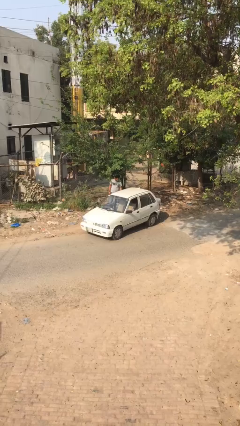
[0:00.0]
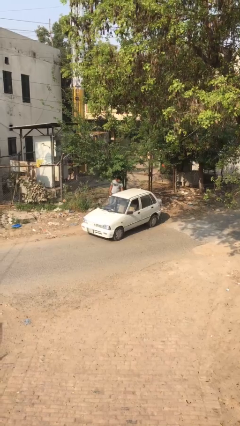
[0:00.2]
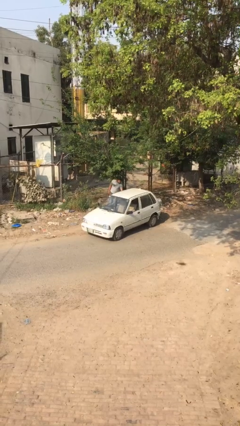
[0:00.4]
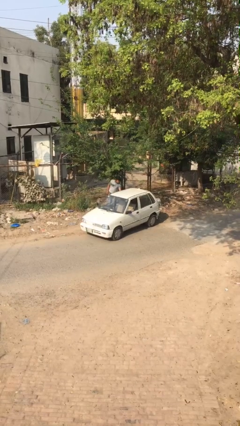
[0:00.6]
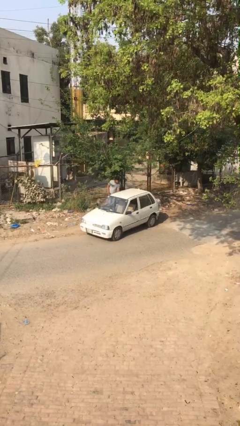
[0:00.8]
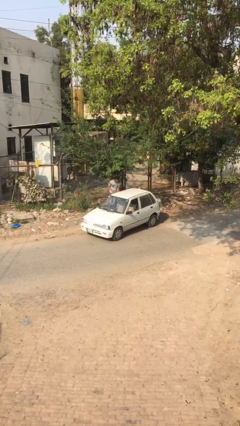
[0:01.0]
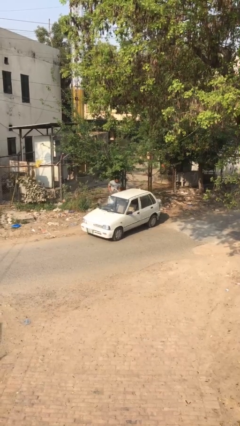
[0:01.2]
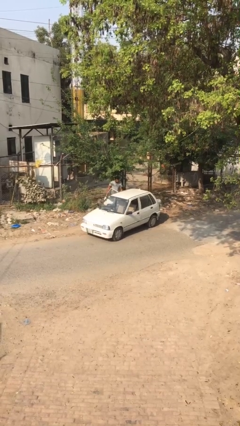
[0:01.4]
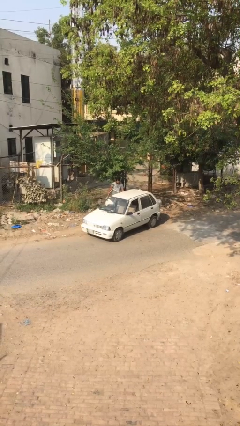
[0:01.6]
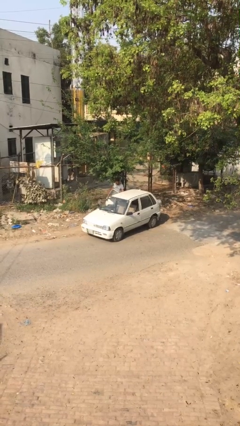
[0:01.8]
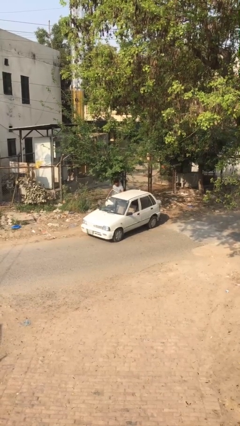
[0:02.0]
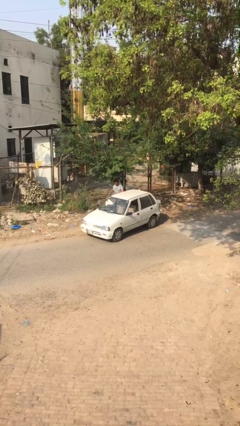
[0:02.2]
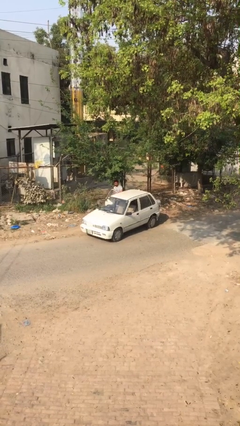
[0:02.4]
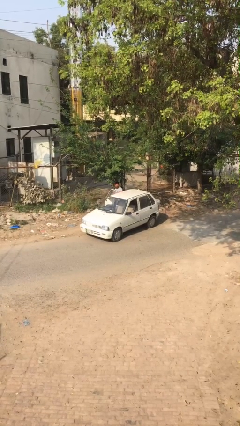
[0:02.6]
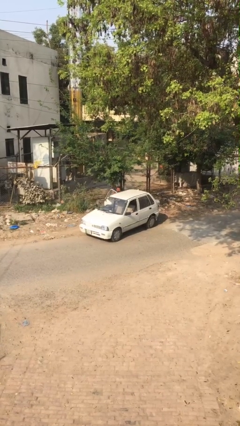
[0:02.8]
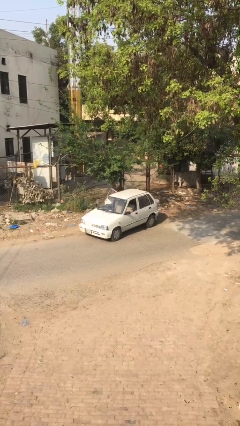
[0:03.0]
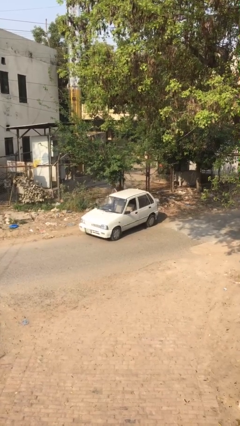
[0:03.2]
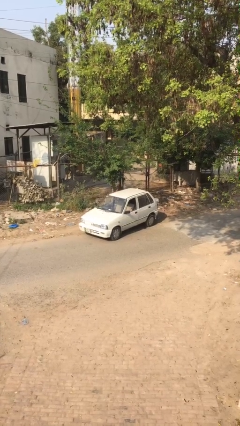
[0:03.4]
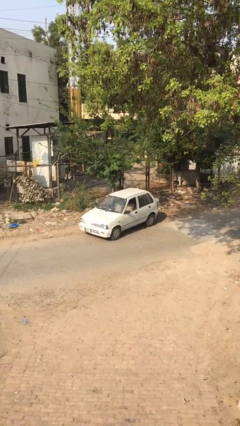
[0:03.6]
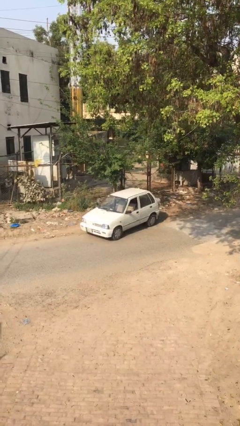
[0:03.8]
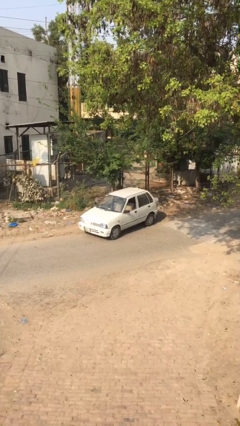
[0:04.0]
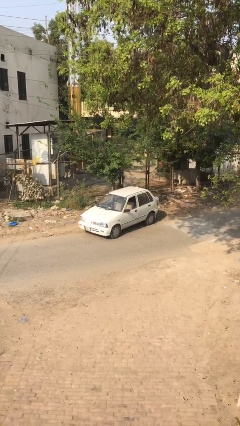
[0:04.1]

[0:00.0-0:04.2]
car picks up person

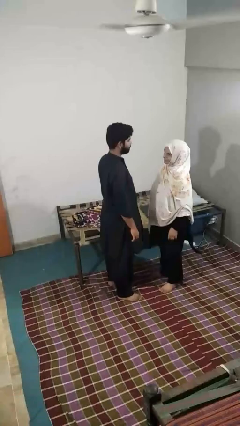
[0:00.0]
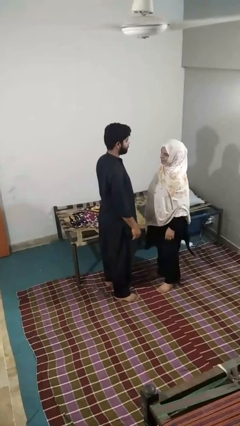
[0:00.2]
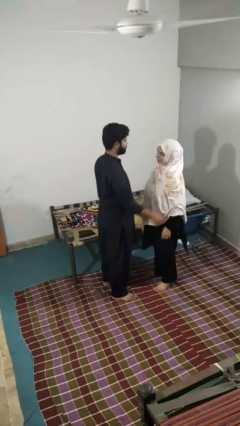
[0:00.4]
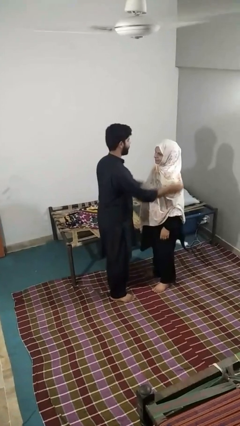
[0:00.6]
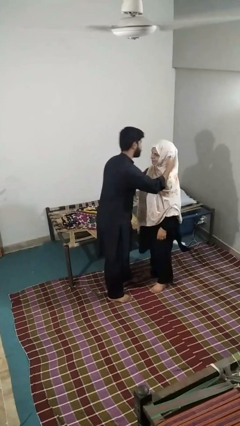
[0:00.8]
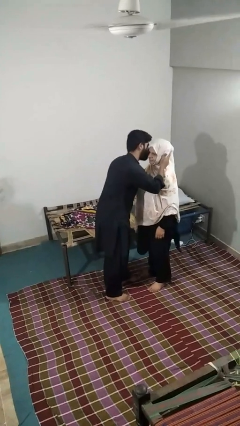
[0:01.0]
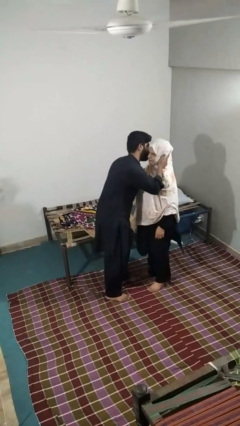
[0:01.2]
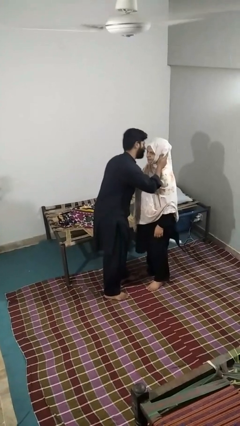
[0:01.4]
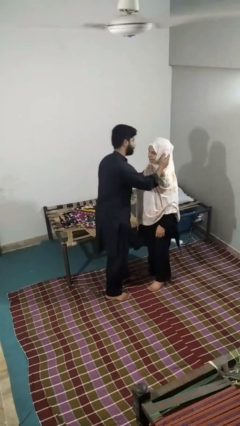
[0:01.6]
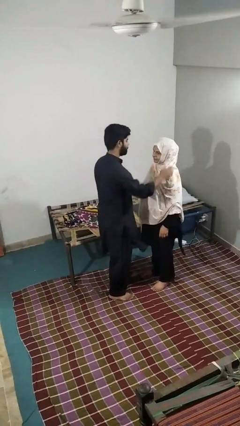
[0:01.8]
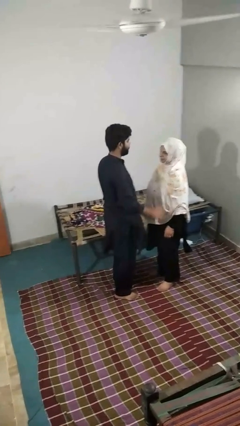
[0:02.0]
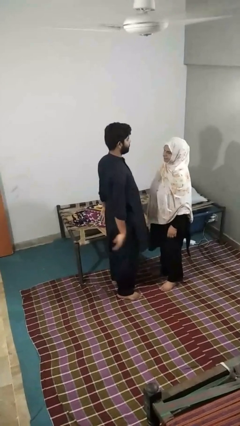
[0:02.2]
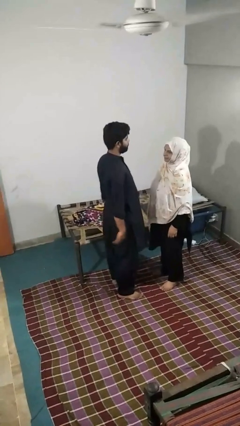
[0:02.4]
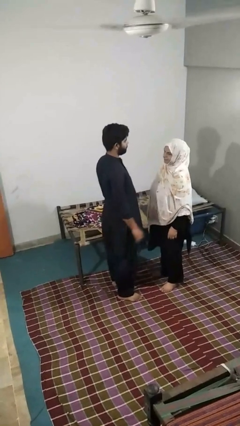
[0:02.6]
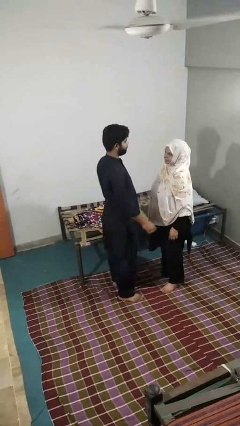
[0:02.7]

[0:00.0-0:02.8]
person kisses cheek of person

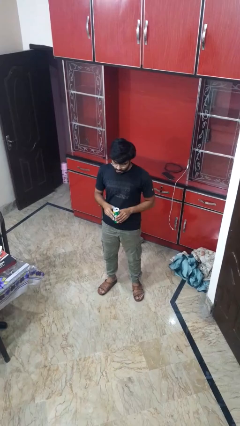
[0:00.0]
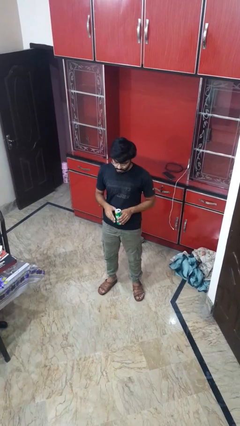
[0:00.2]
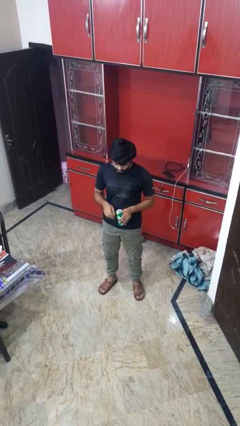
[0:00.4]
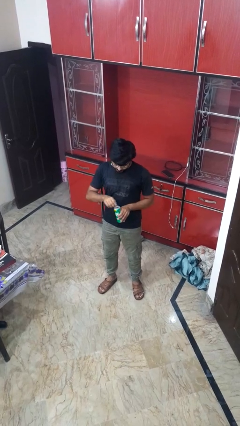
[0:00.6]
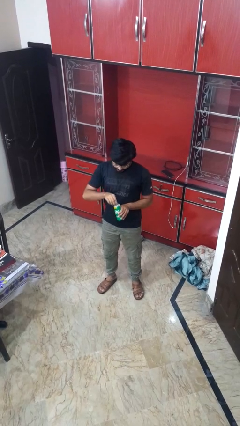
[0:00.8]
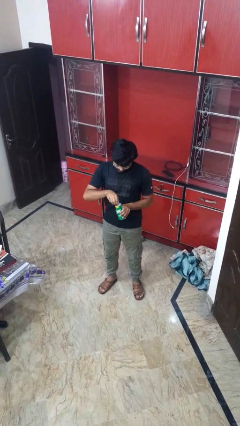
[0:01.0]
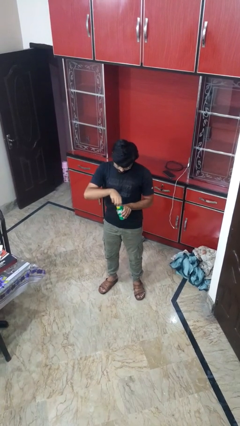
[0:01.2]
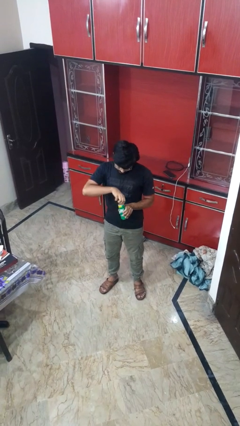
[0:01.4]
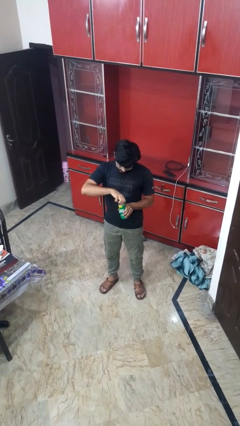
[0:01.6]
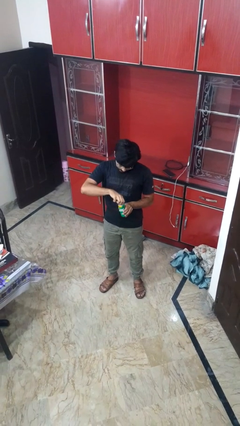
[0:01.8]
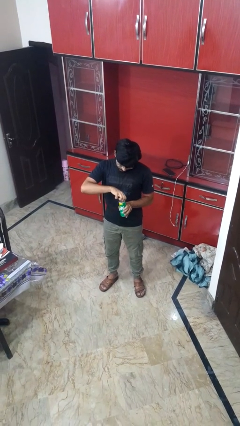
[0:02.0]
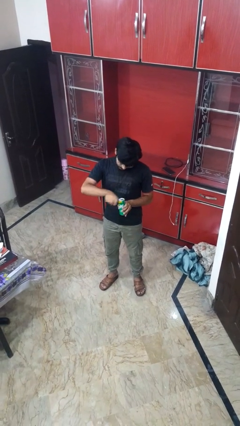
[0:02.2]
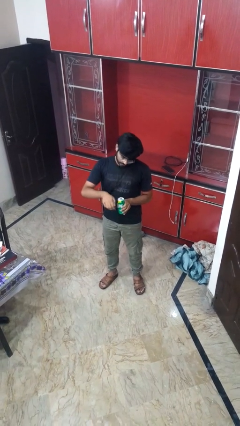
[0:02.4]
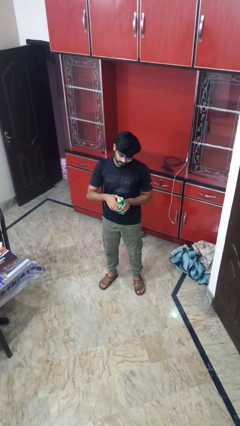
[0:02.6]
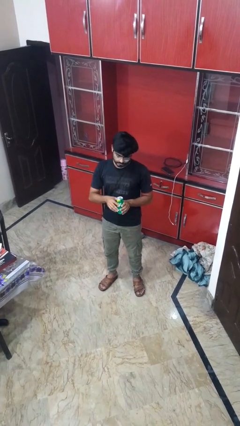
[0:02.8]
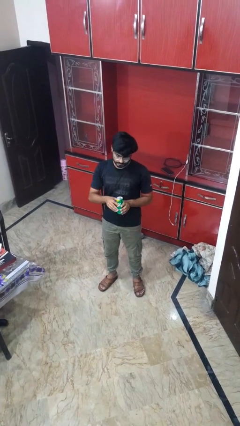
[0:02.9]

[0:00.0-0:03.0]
person opens beverage can

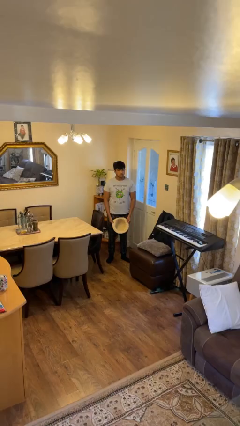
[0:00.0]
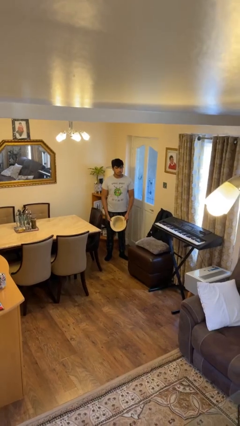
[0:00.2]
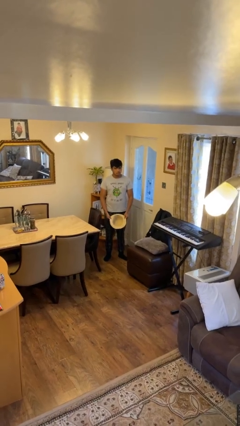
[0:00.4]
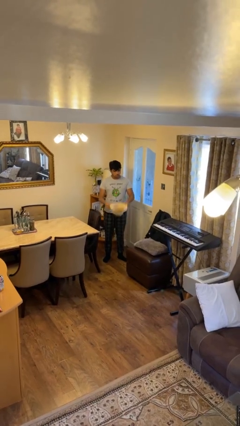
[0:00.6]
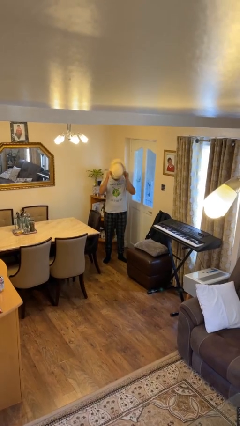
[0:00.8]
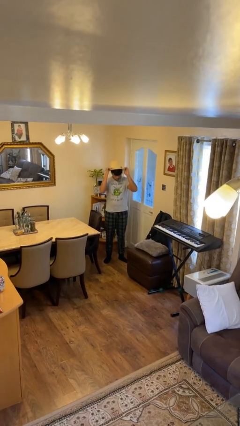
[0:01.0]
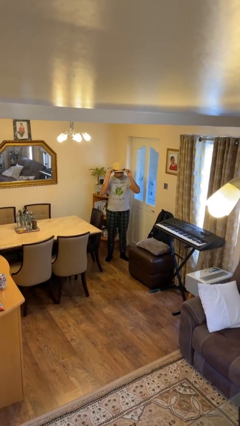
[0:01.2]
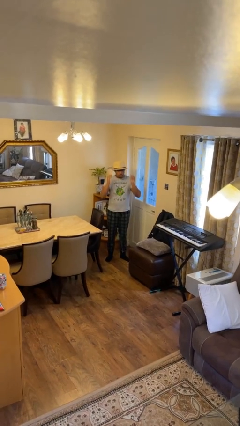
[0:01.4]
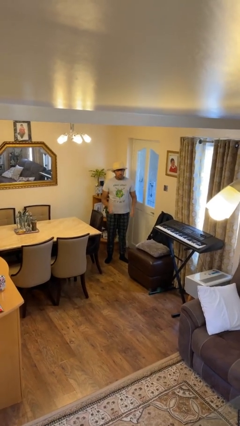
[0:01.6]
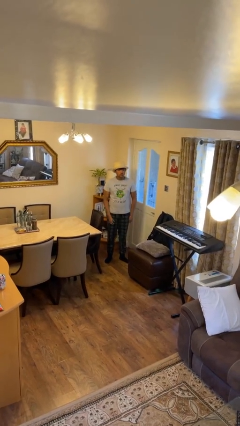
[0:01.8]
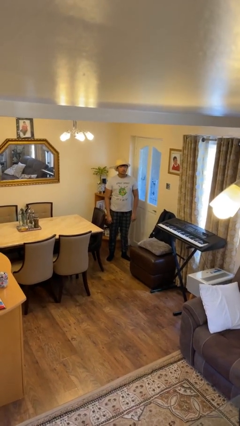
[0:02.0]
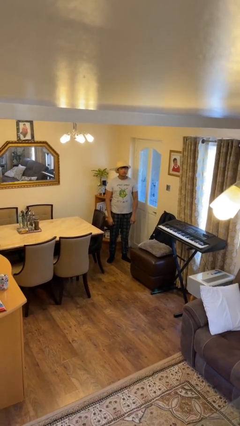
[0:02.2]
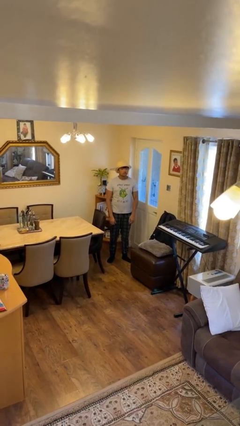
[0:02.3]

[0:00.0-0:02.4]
person puts on hat

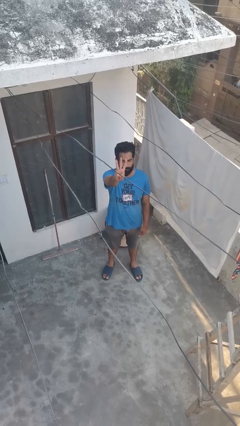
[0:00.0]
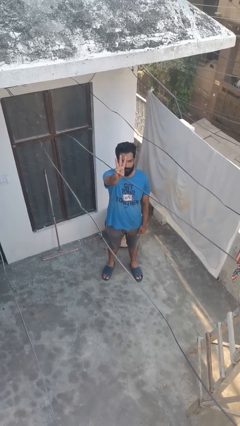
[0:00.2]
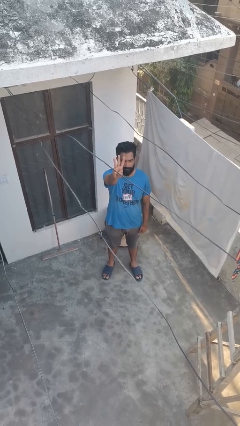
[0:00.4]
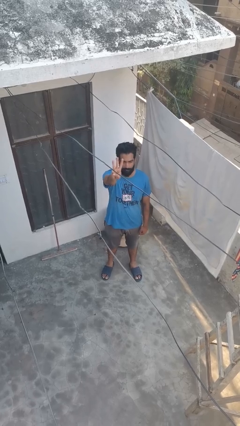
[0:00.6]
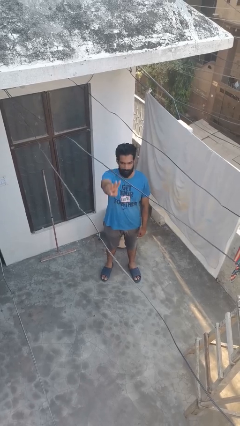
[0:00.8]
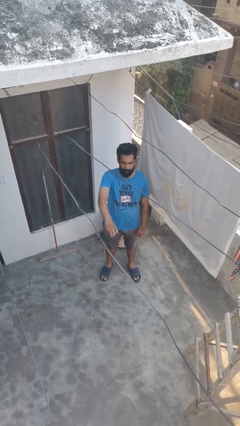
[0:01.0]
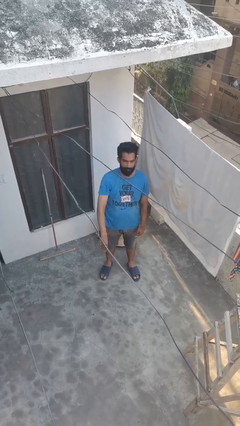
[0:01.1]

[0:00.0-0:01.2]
person gestures number three

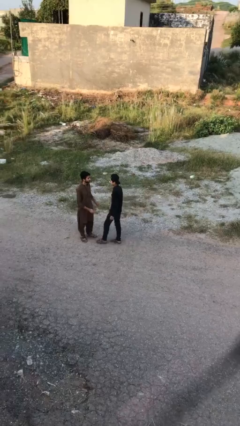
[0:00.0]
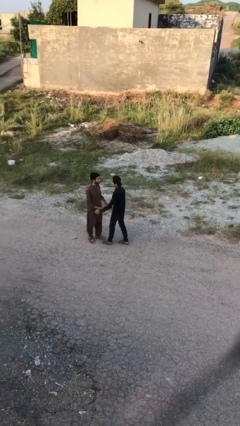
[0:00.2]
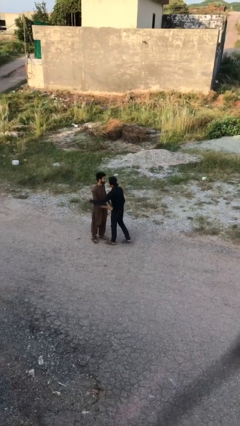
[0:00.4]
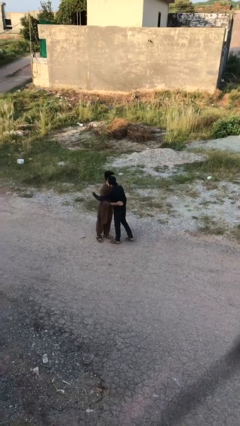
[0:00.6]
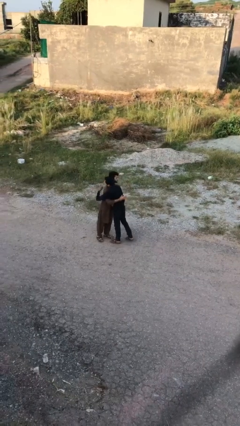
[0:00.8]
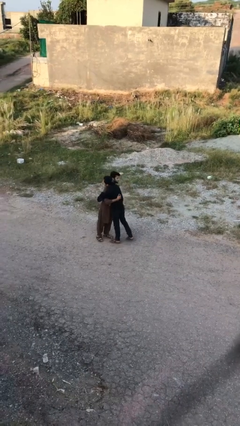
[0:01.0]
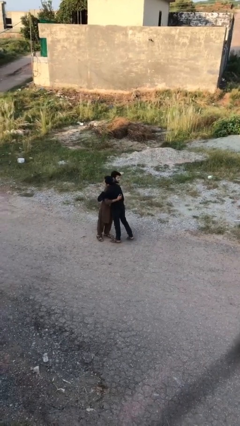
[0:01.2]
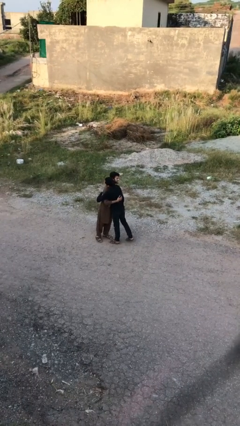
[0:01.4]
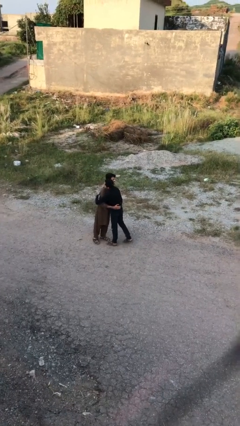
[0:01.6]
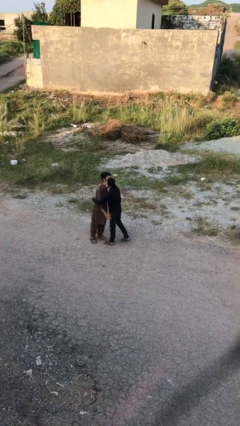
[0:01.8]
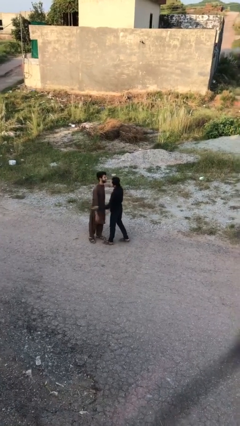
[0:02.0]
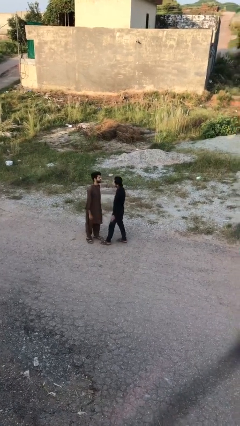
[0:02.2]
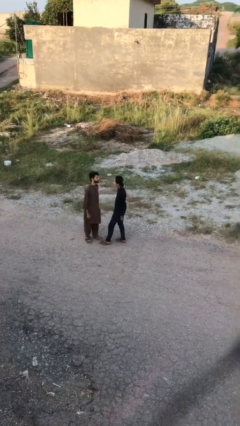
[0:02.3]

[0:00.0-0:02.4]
person embraces person

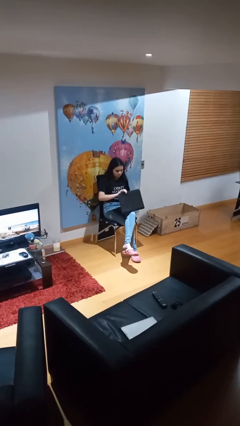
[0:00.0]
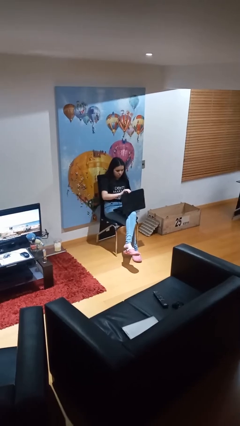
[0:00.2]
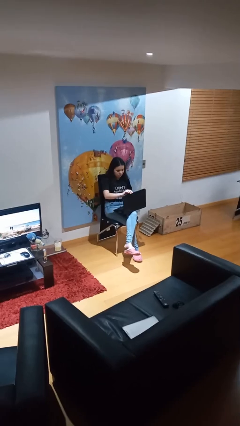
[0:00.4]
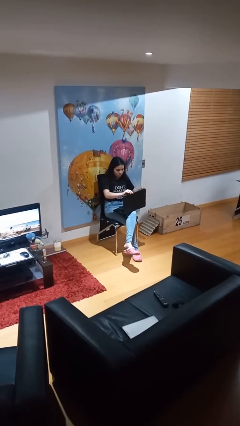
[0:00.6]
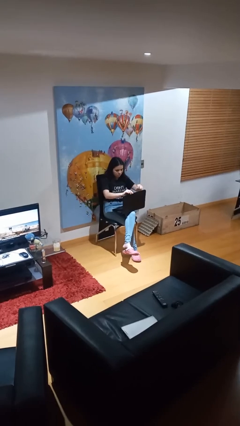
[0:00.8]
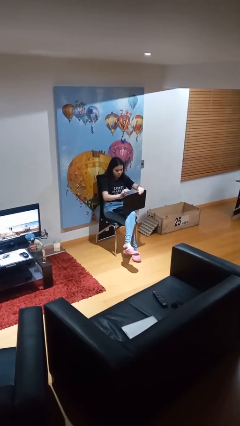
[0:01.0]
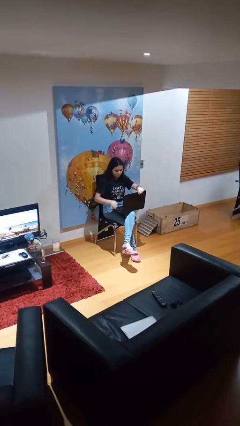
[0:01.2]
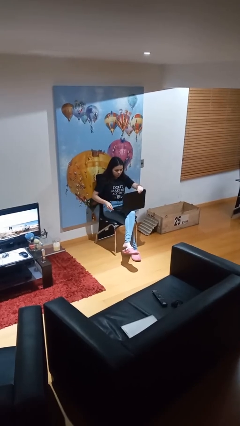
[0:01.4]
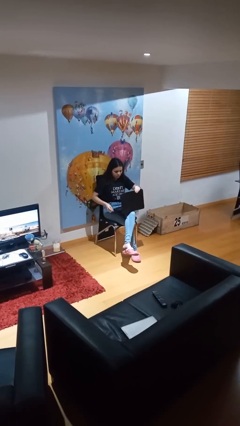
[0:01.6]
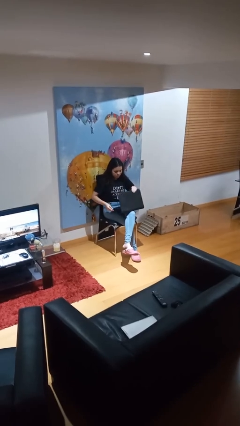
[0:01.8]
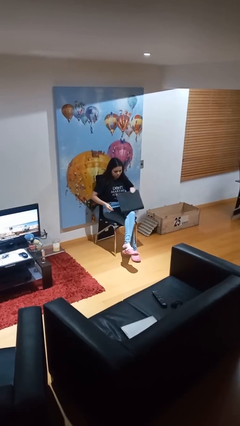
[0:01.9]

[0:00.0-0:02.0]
person interacts with laptop
